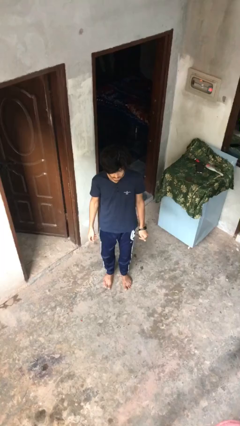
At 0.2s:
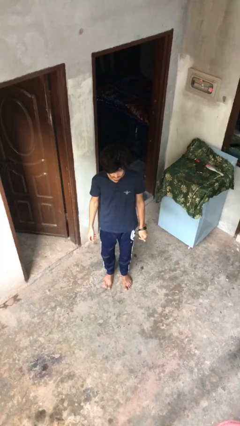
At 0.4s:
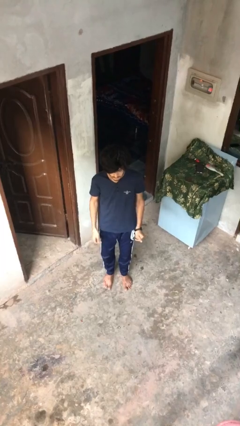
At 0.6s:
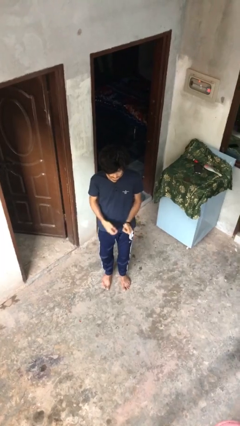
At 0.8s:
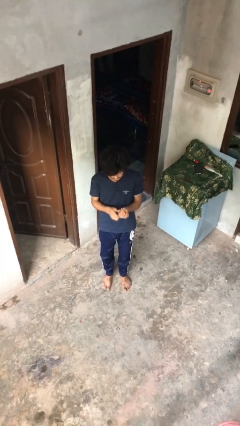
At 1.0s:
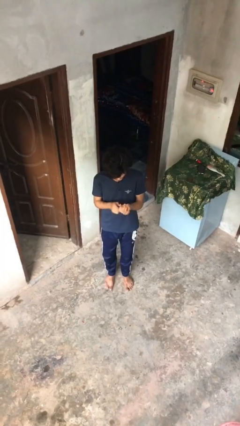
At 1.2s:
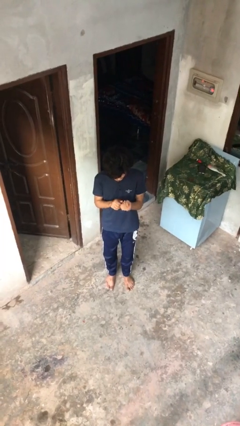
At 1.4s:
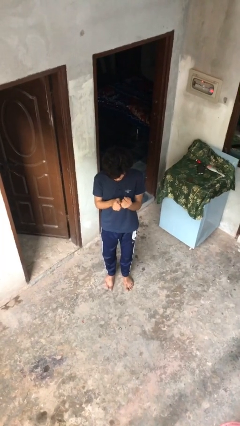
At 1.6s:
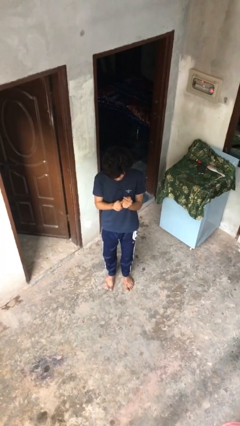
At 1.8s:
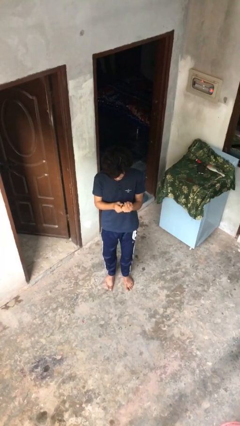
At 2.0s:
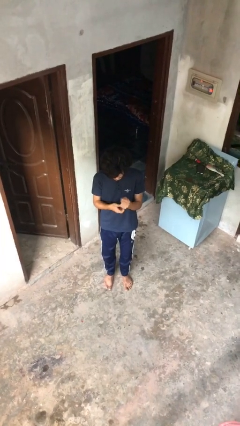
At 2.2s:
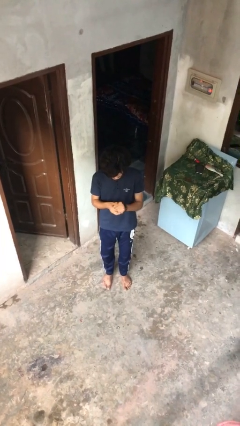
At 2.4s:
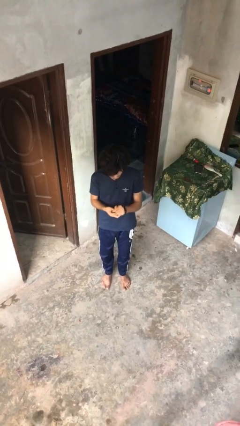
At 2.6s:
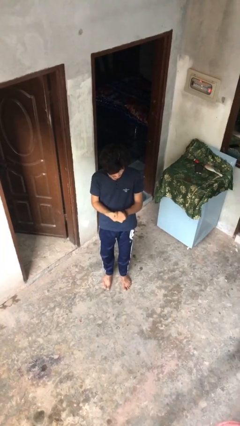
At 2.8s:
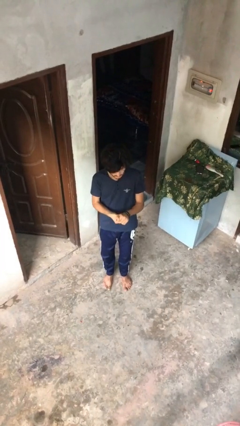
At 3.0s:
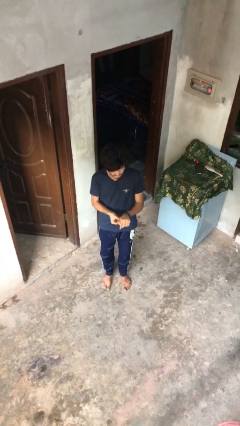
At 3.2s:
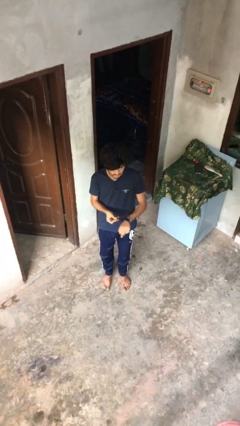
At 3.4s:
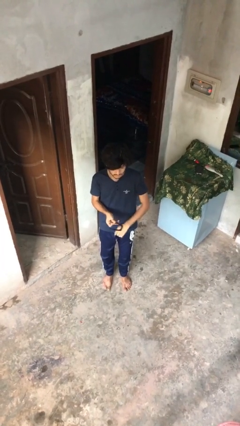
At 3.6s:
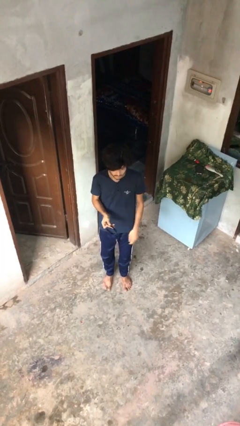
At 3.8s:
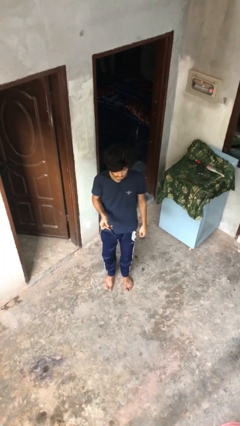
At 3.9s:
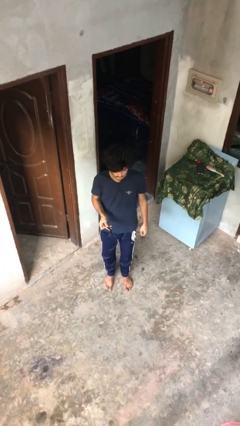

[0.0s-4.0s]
person takes off wristwatch

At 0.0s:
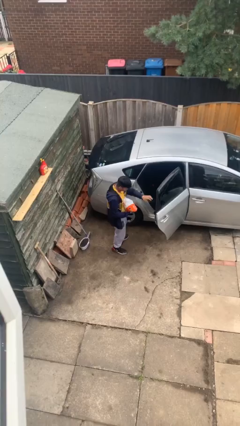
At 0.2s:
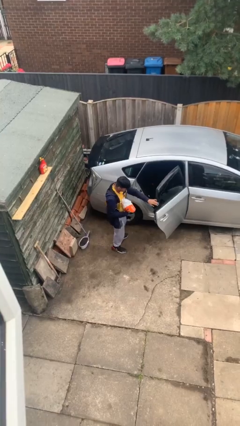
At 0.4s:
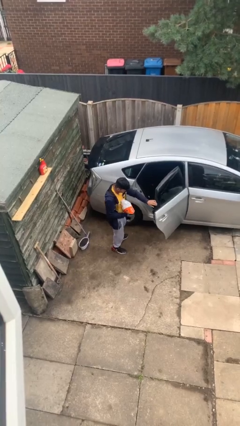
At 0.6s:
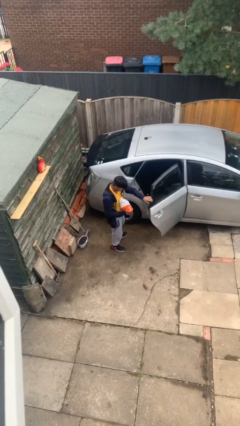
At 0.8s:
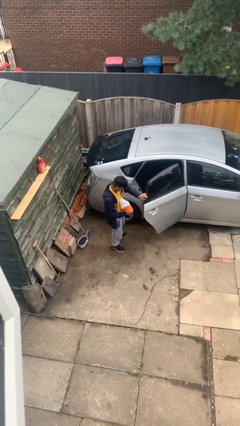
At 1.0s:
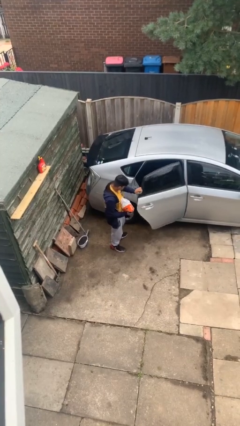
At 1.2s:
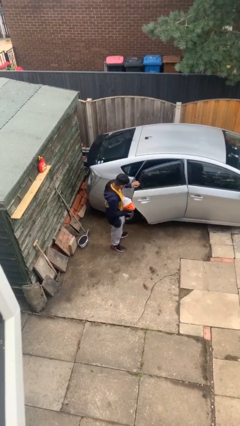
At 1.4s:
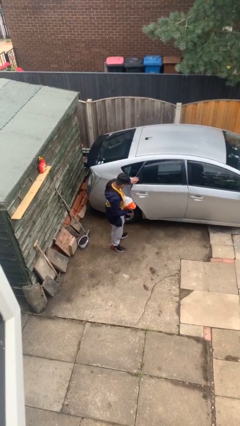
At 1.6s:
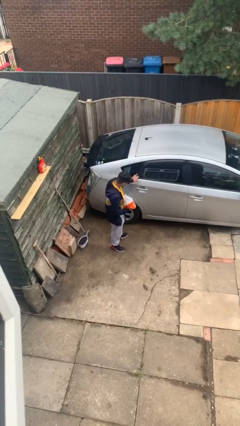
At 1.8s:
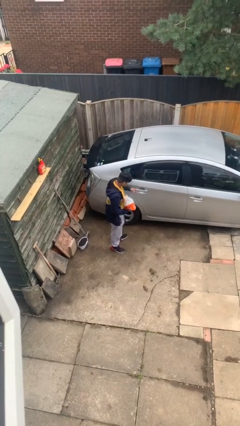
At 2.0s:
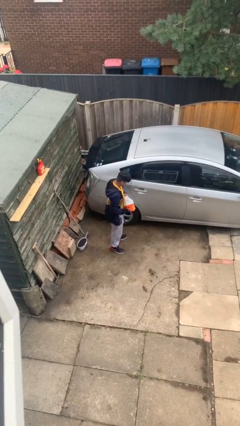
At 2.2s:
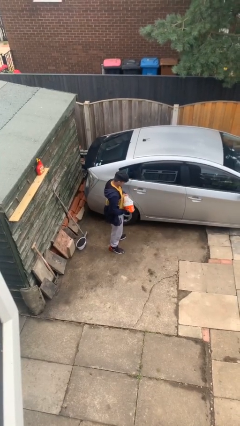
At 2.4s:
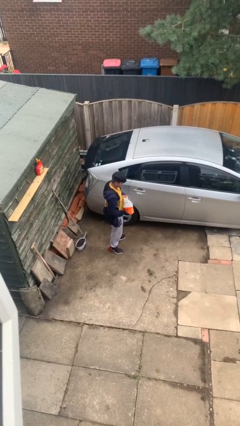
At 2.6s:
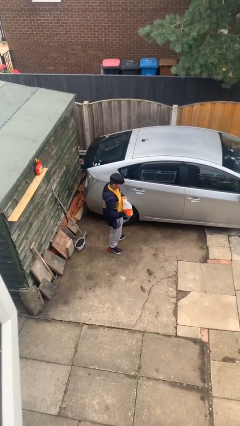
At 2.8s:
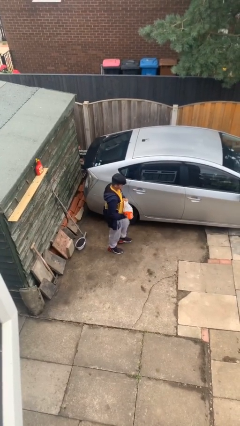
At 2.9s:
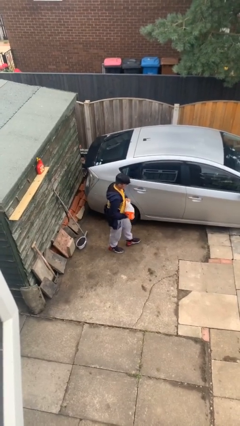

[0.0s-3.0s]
person closes car door

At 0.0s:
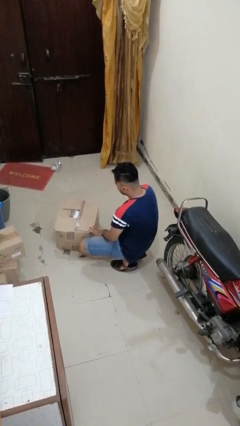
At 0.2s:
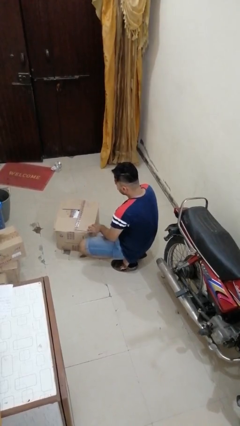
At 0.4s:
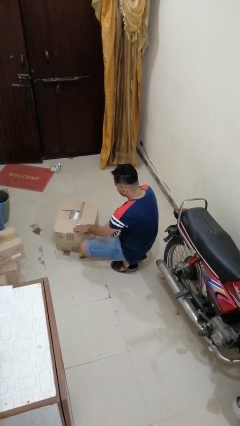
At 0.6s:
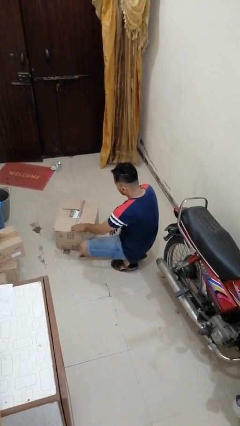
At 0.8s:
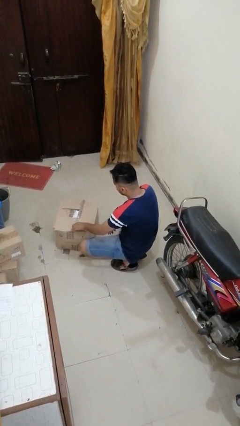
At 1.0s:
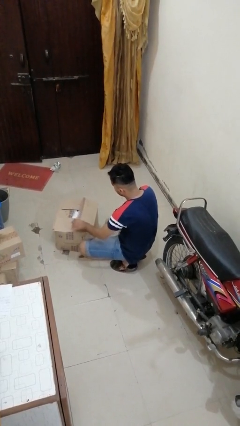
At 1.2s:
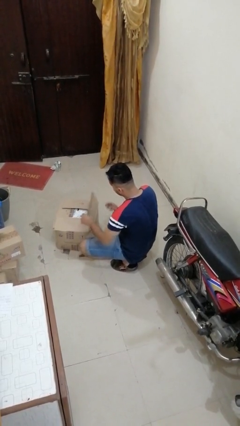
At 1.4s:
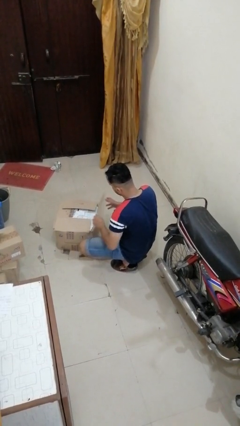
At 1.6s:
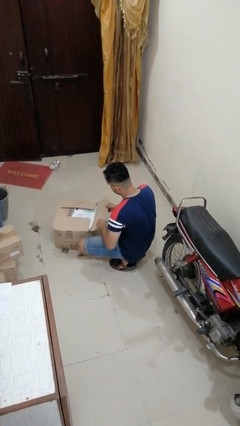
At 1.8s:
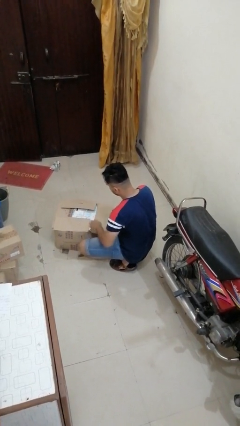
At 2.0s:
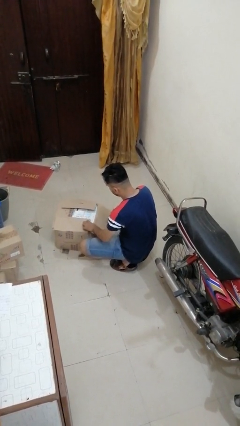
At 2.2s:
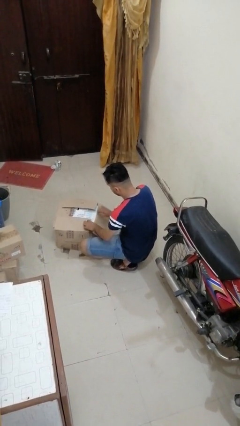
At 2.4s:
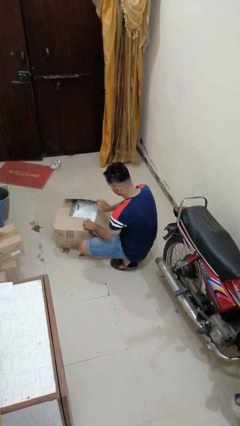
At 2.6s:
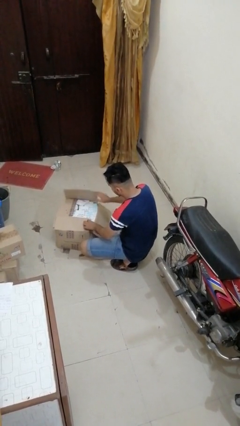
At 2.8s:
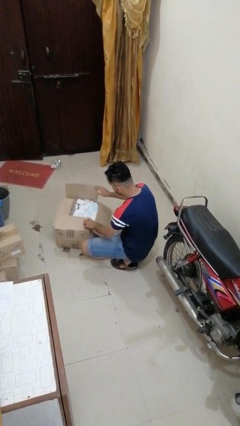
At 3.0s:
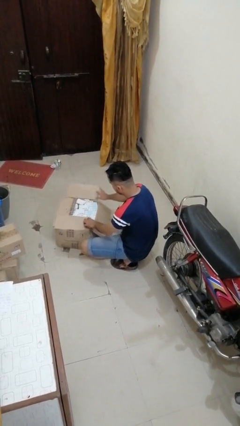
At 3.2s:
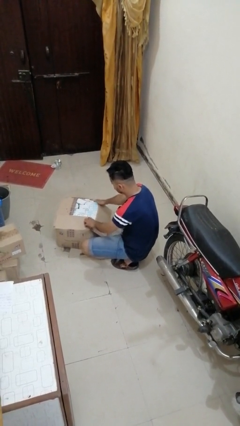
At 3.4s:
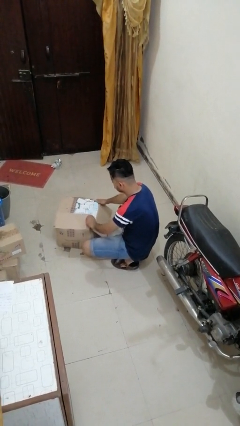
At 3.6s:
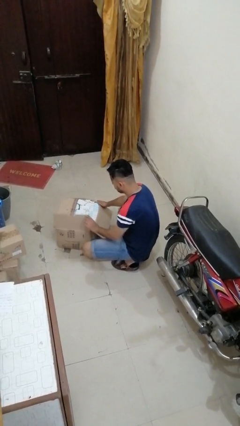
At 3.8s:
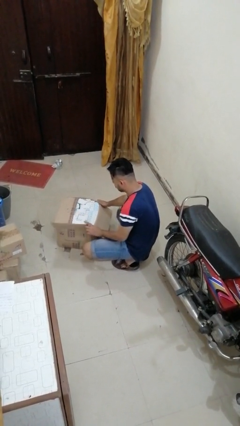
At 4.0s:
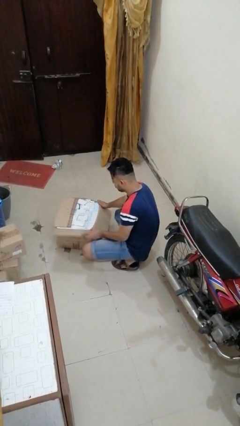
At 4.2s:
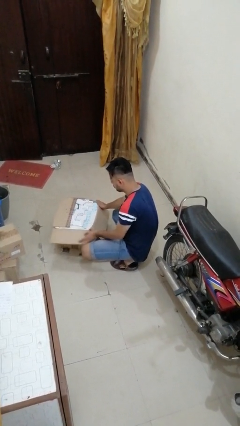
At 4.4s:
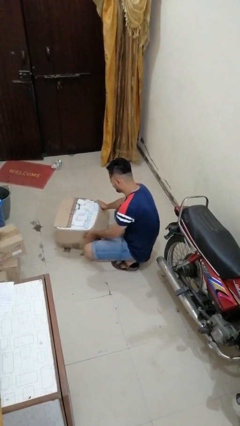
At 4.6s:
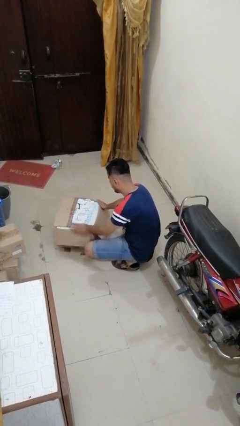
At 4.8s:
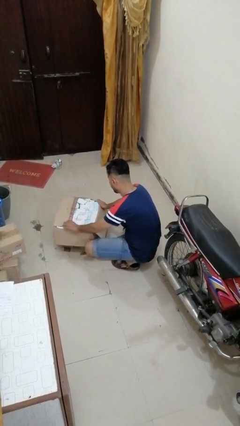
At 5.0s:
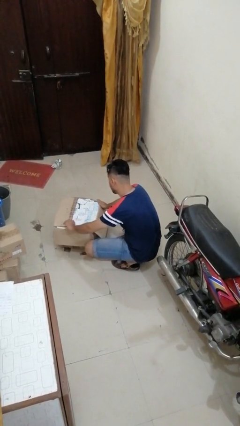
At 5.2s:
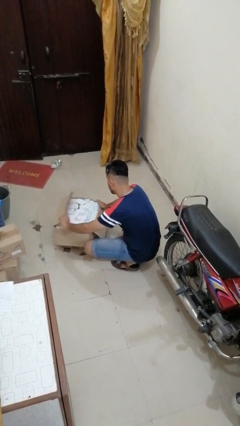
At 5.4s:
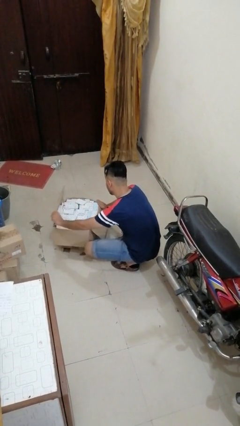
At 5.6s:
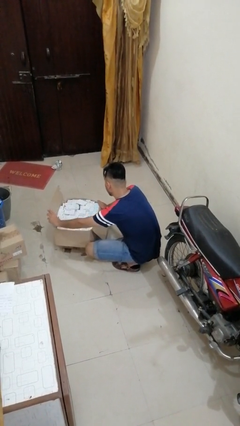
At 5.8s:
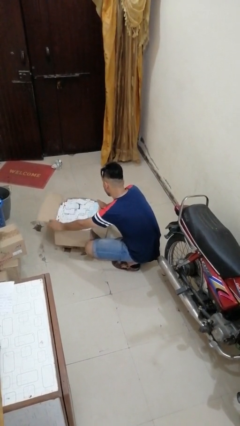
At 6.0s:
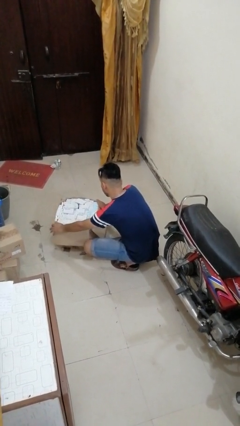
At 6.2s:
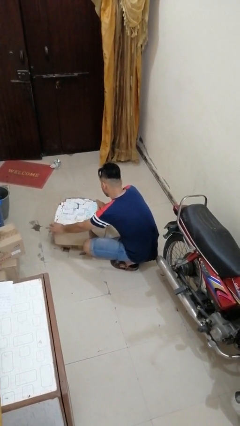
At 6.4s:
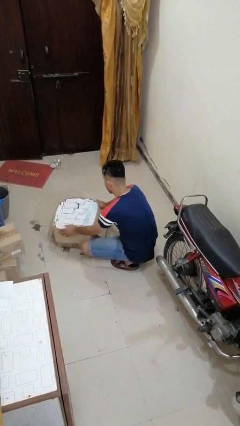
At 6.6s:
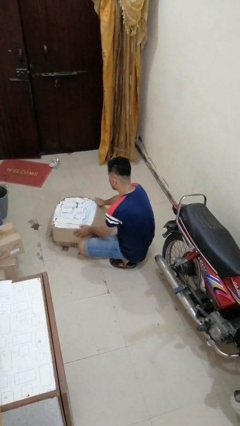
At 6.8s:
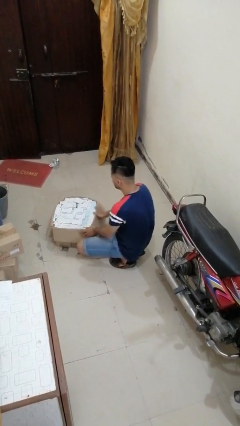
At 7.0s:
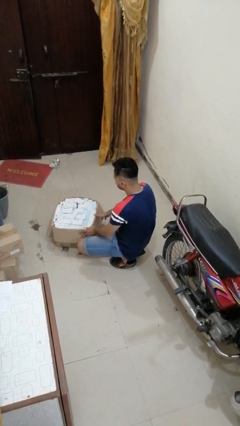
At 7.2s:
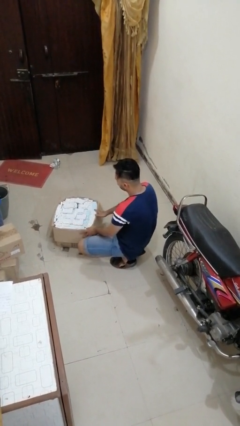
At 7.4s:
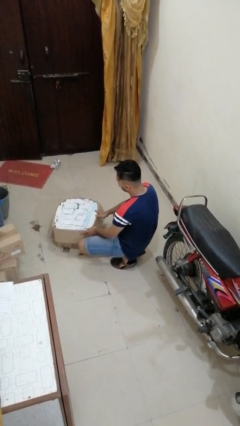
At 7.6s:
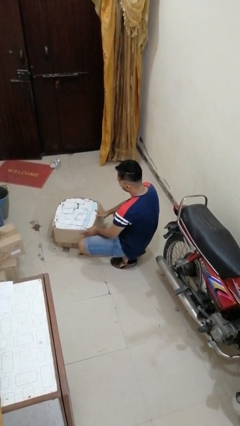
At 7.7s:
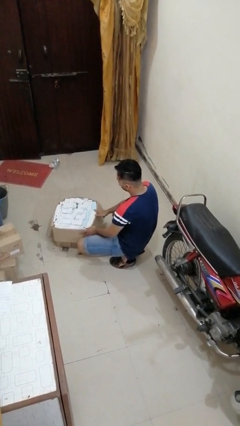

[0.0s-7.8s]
person opens box

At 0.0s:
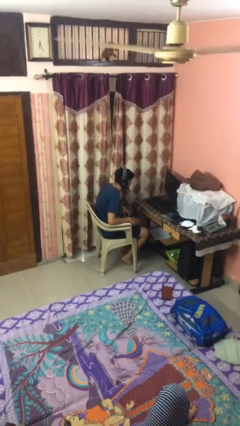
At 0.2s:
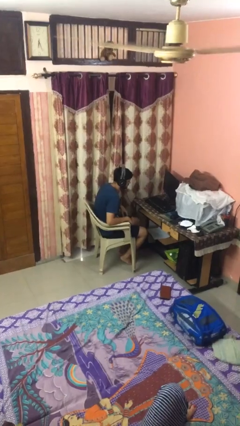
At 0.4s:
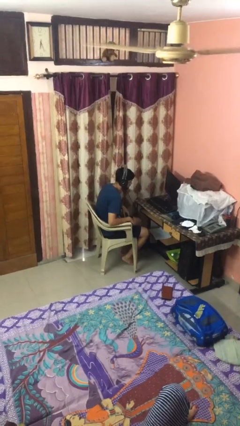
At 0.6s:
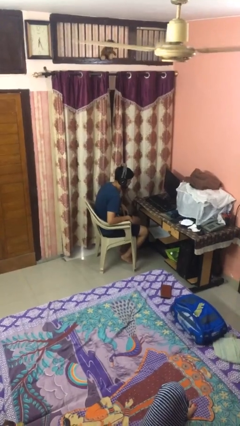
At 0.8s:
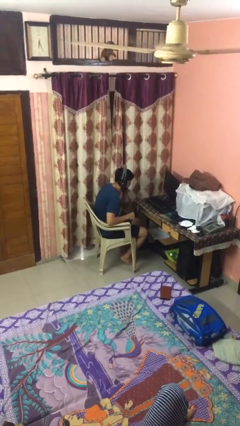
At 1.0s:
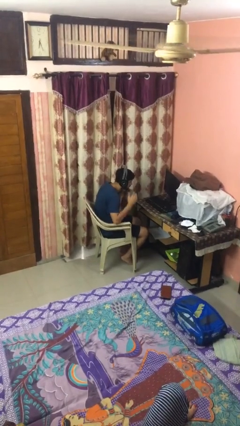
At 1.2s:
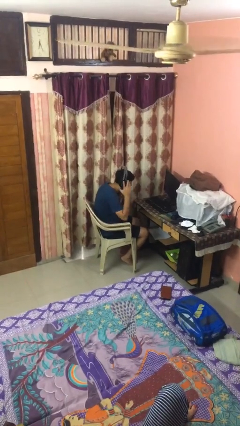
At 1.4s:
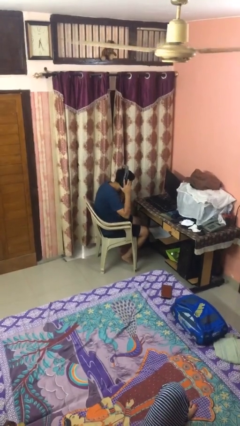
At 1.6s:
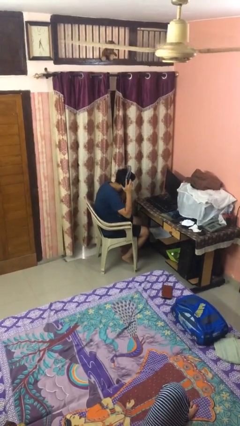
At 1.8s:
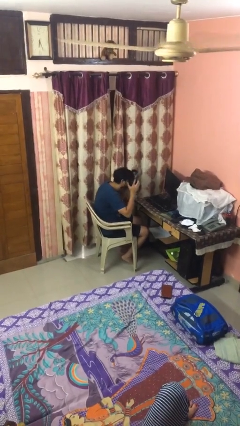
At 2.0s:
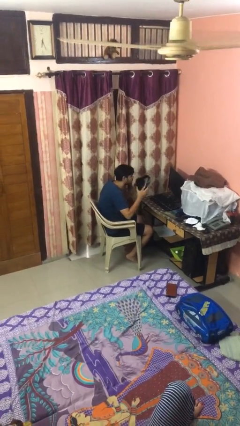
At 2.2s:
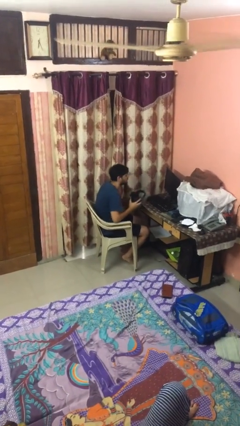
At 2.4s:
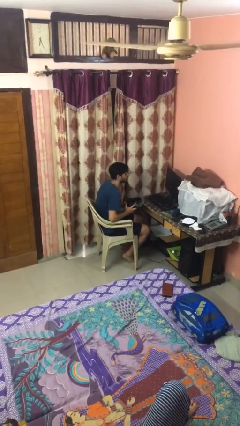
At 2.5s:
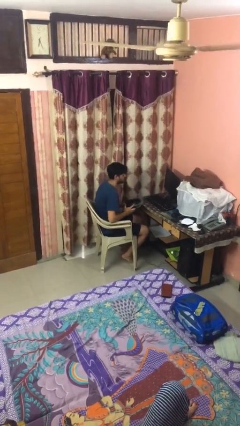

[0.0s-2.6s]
person takes off headphones

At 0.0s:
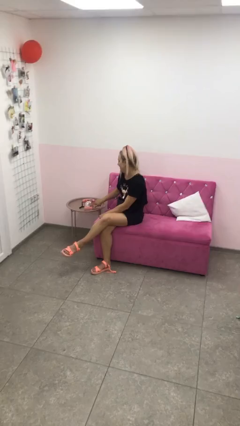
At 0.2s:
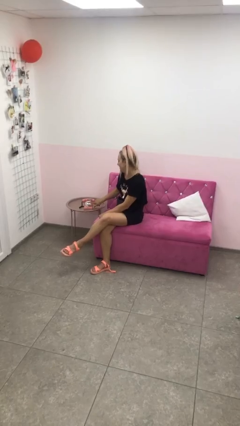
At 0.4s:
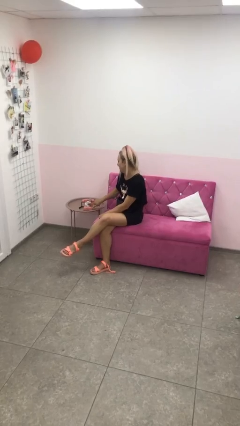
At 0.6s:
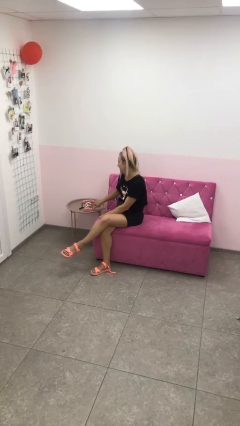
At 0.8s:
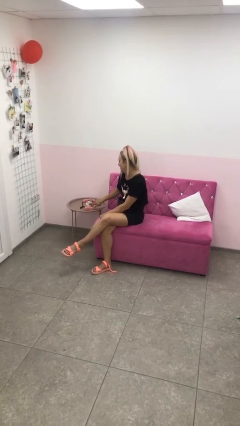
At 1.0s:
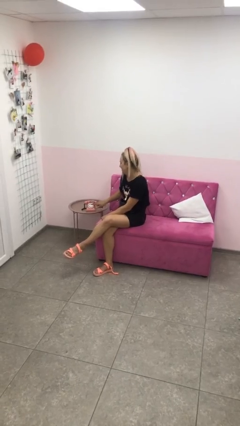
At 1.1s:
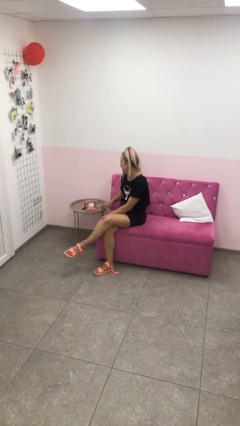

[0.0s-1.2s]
person taps object with finger
